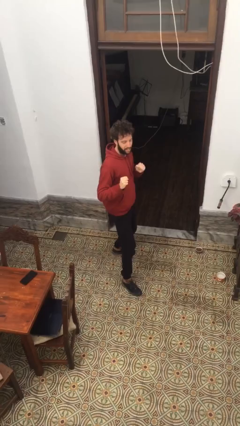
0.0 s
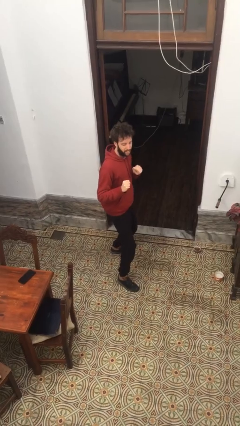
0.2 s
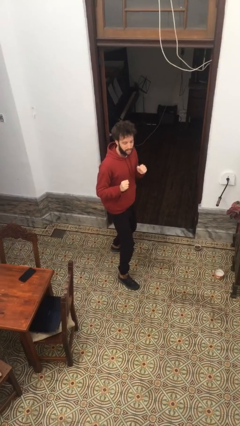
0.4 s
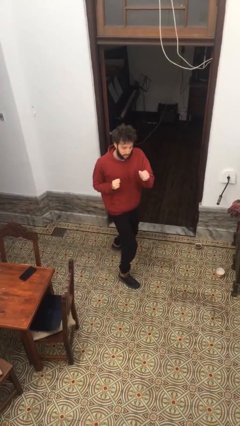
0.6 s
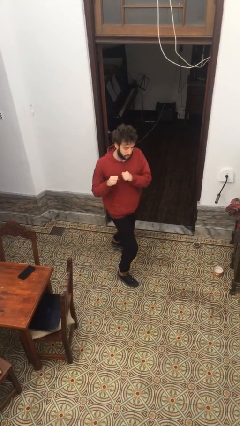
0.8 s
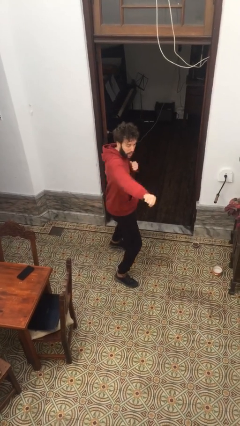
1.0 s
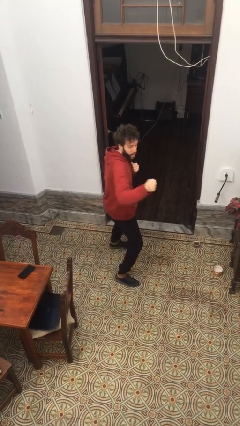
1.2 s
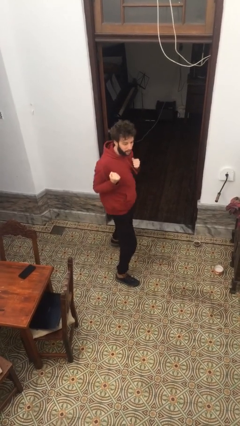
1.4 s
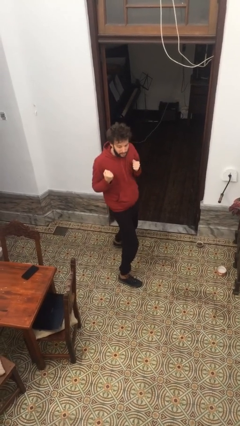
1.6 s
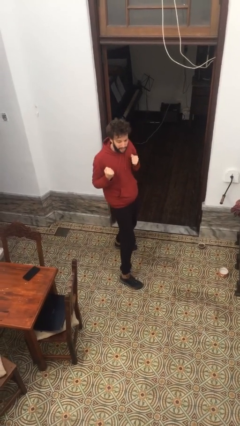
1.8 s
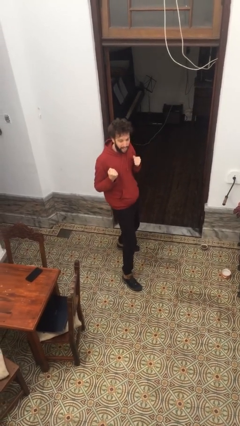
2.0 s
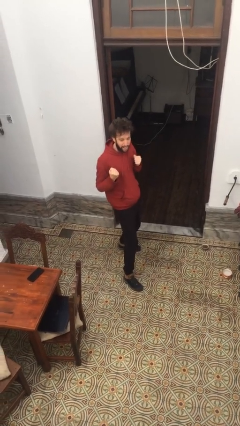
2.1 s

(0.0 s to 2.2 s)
person karate chop

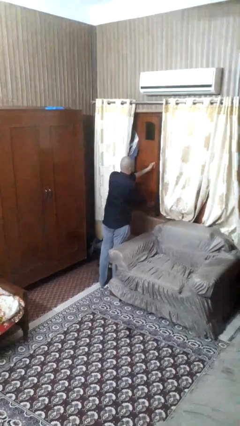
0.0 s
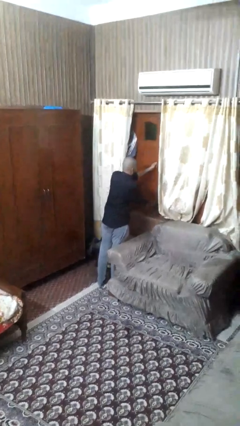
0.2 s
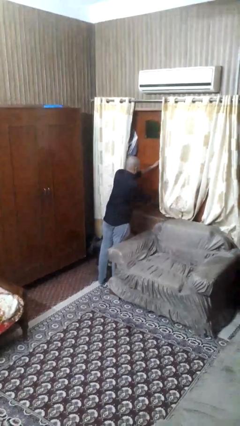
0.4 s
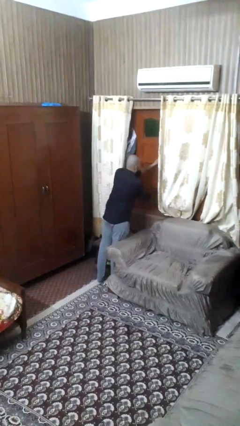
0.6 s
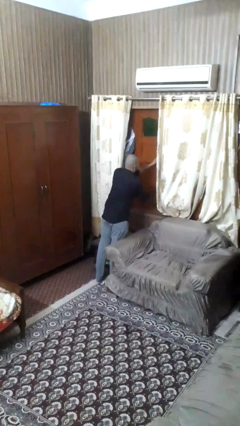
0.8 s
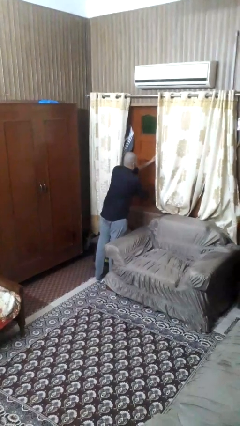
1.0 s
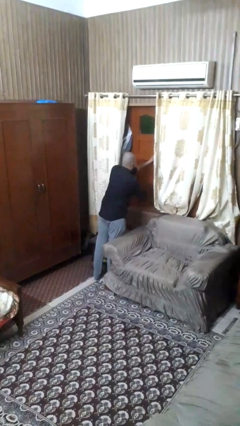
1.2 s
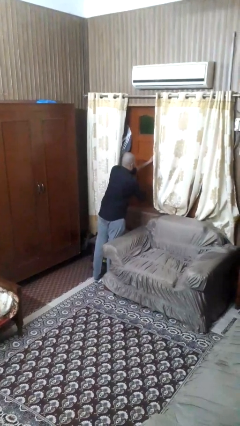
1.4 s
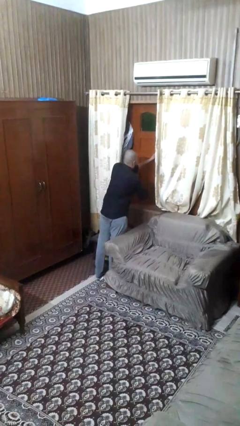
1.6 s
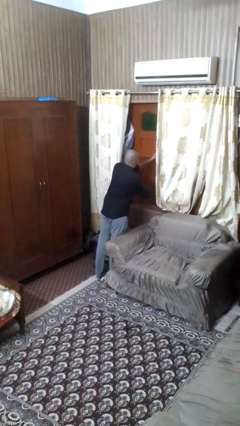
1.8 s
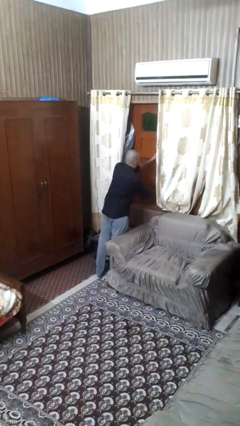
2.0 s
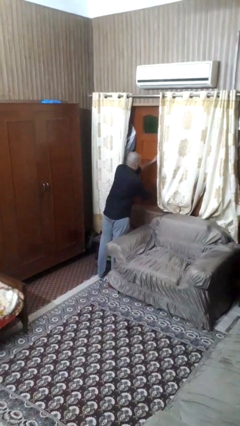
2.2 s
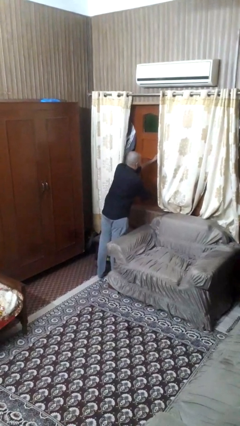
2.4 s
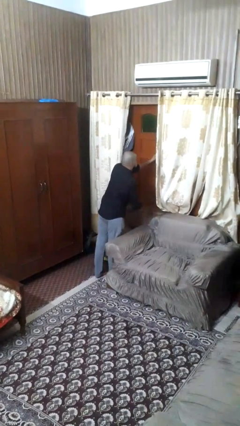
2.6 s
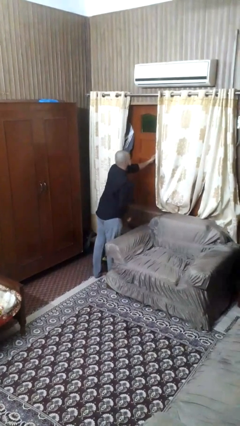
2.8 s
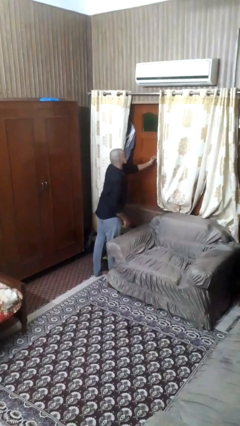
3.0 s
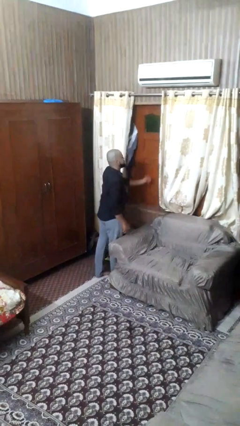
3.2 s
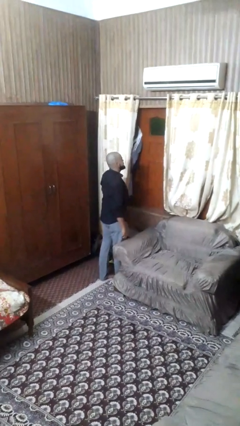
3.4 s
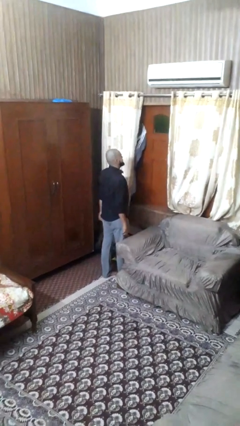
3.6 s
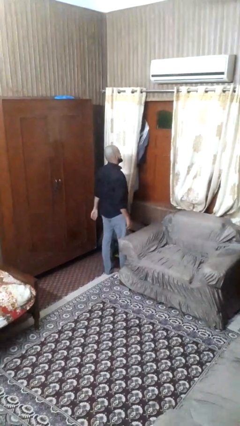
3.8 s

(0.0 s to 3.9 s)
person closes home window

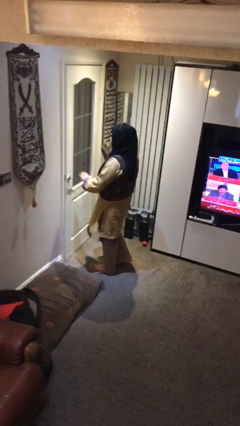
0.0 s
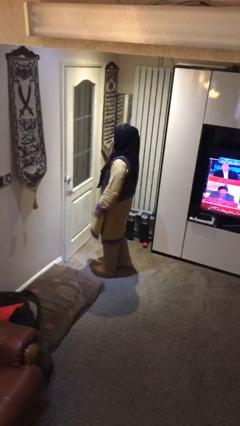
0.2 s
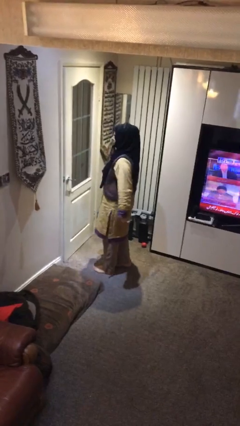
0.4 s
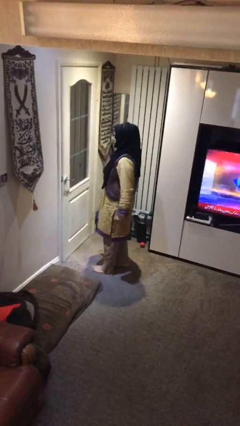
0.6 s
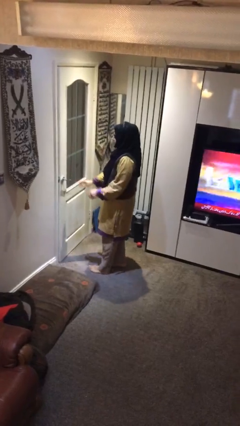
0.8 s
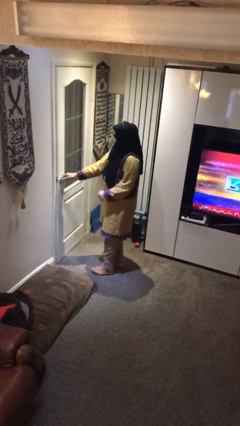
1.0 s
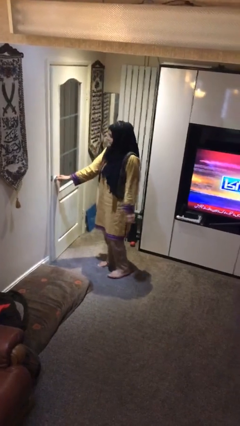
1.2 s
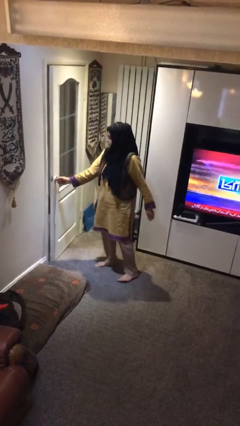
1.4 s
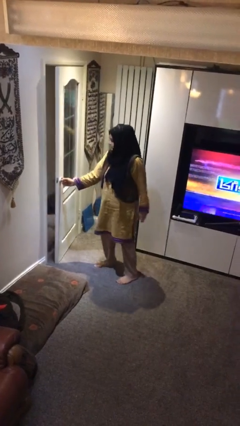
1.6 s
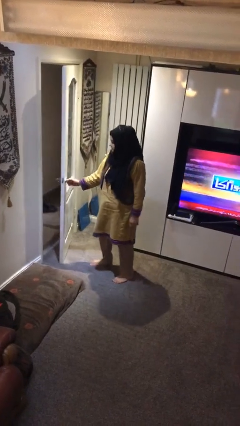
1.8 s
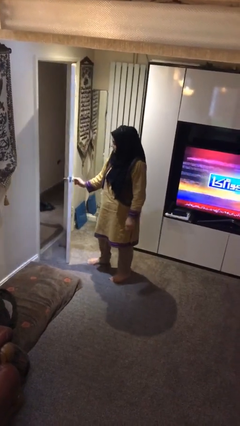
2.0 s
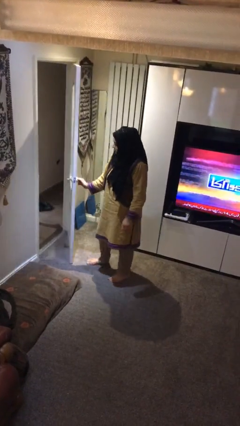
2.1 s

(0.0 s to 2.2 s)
person opens facility door

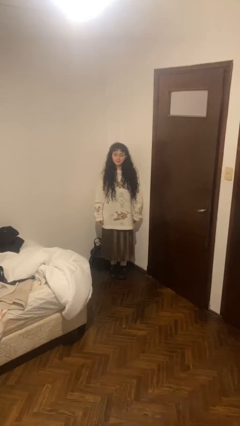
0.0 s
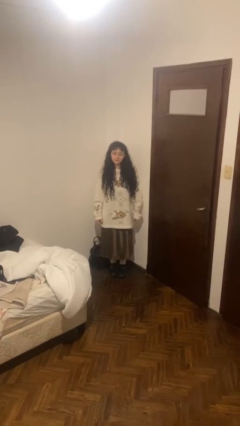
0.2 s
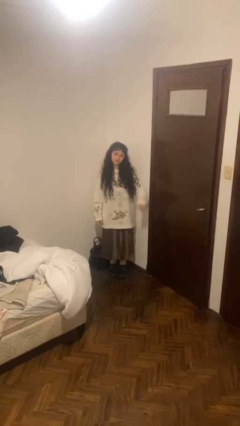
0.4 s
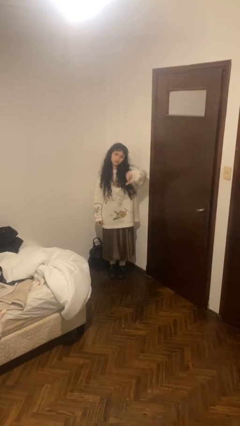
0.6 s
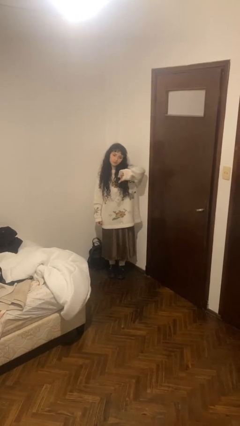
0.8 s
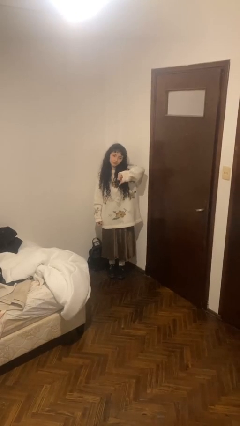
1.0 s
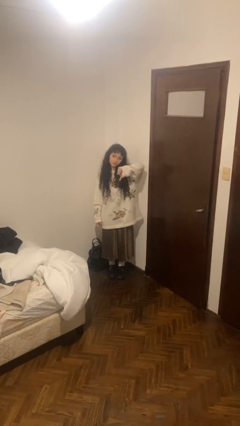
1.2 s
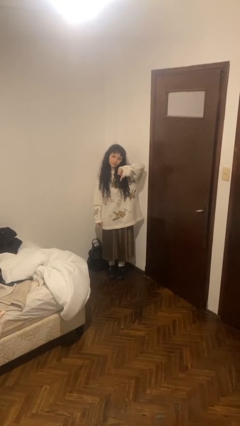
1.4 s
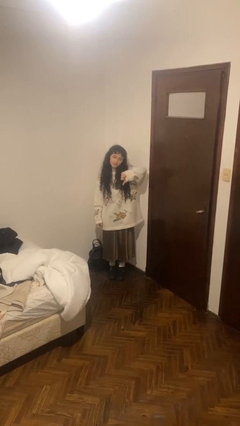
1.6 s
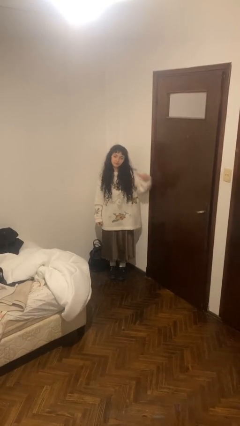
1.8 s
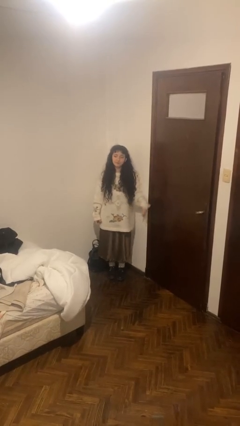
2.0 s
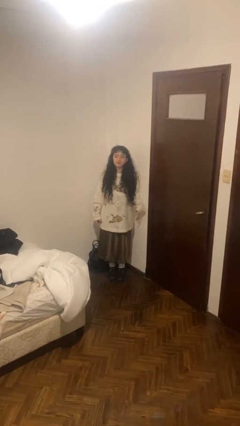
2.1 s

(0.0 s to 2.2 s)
person gestures thumbs down

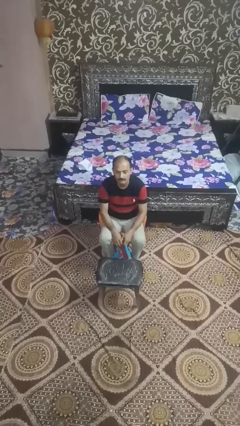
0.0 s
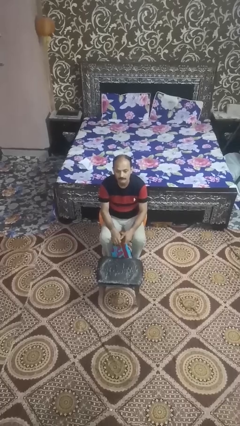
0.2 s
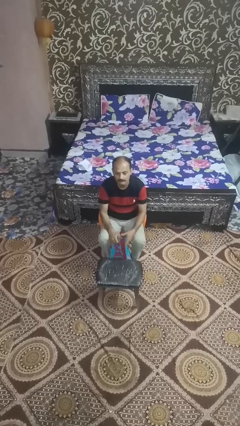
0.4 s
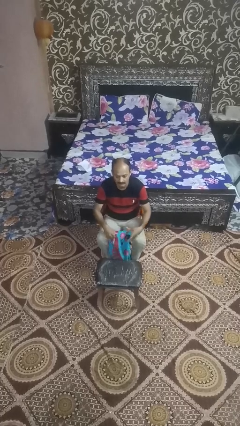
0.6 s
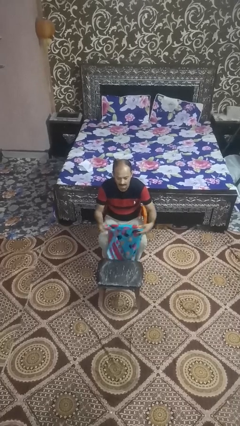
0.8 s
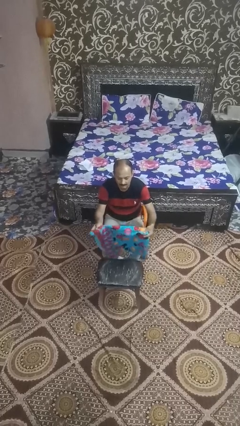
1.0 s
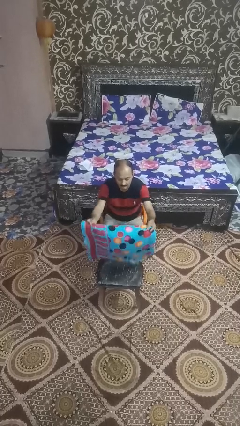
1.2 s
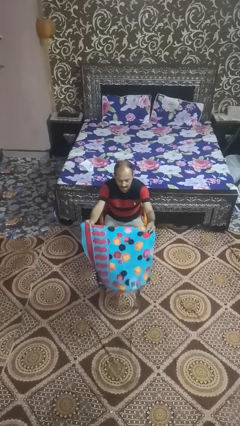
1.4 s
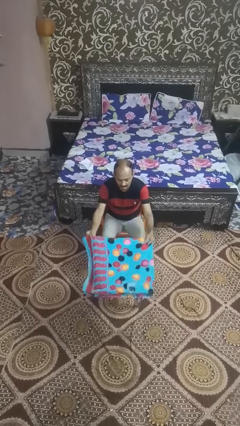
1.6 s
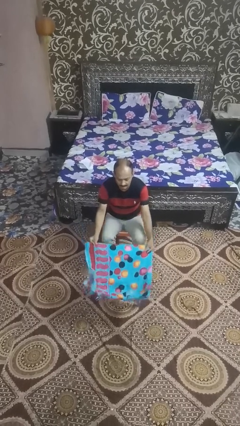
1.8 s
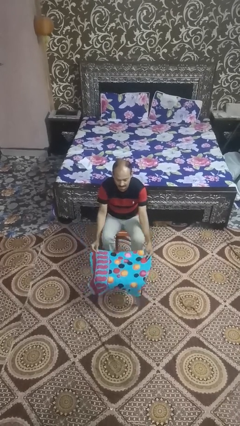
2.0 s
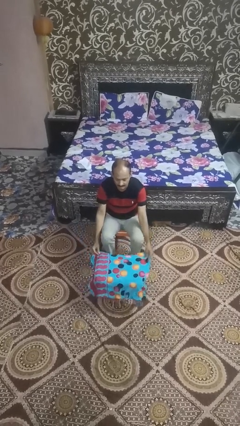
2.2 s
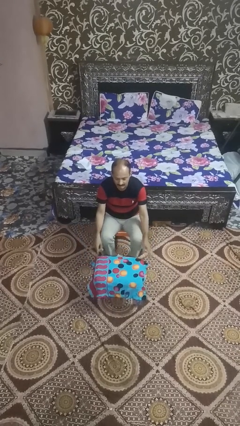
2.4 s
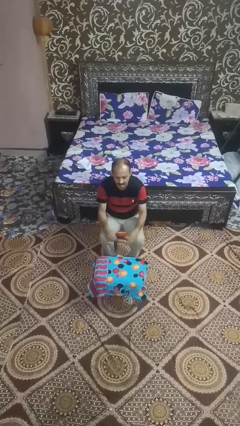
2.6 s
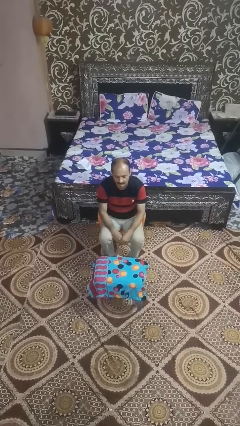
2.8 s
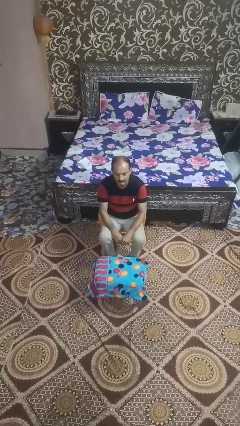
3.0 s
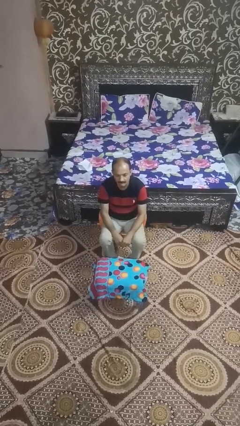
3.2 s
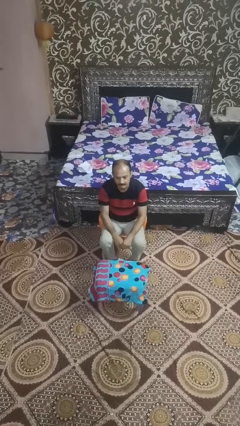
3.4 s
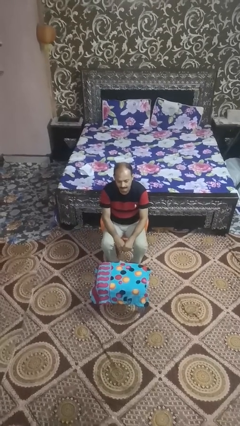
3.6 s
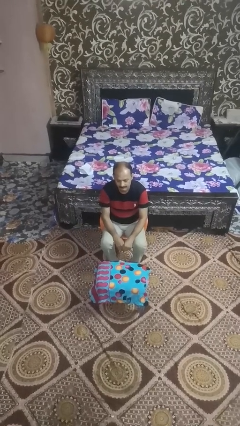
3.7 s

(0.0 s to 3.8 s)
person spreads tablecloth

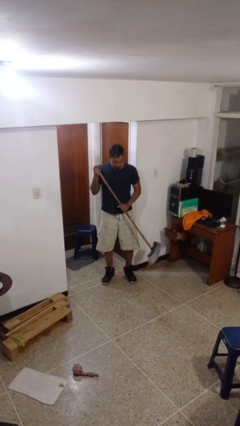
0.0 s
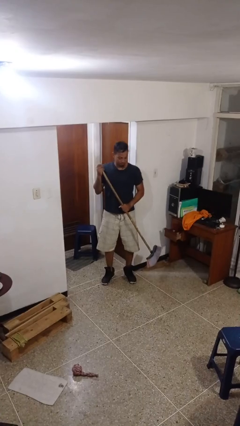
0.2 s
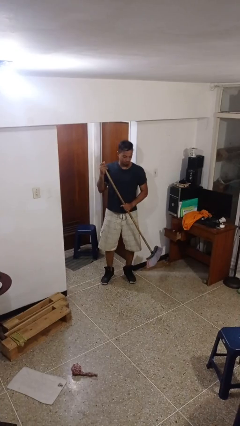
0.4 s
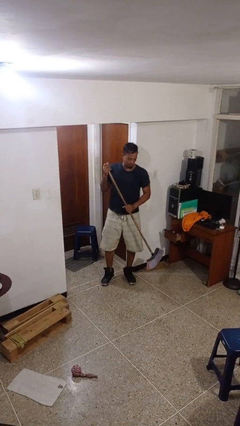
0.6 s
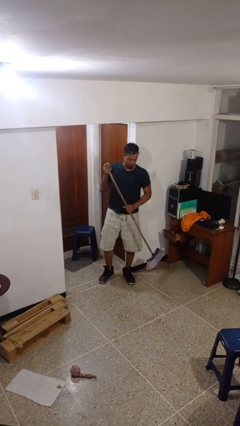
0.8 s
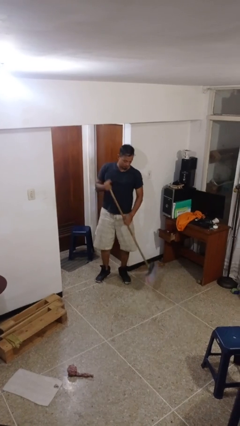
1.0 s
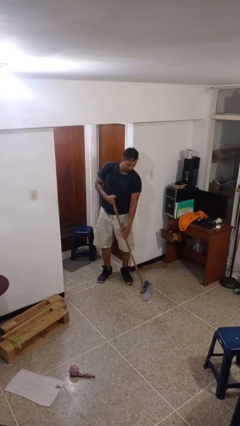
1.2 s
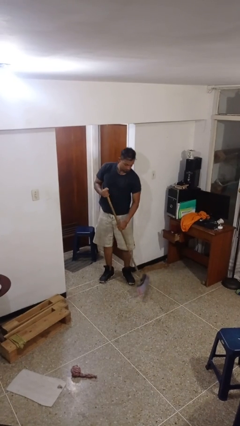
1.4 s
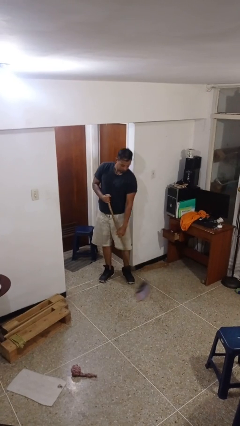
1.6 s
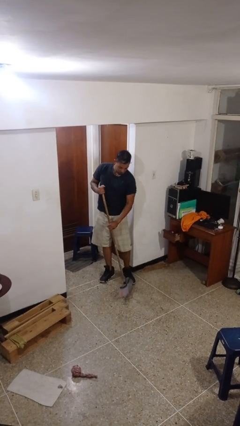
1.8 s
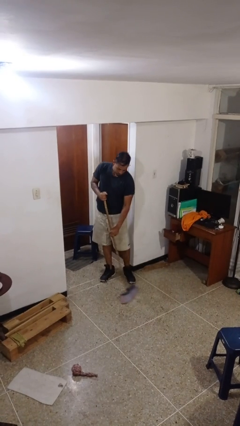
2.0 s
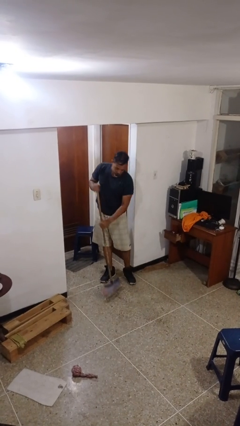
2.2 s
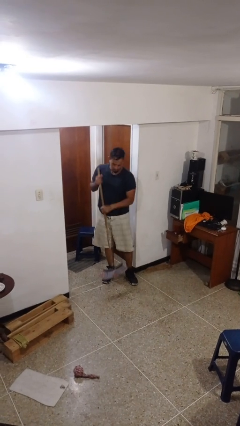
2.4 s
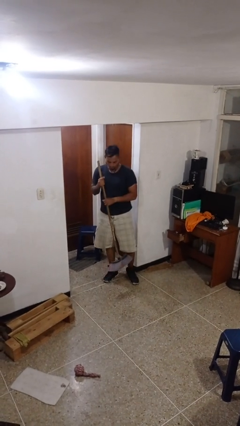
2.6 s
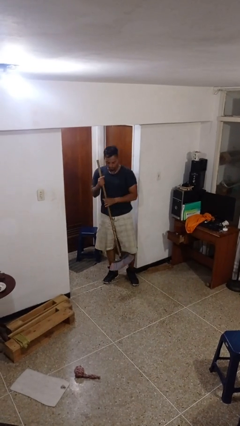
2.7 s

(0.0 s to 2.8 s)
person sweeps floor

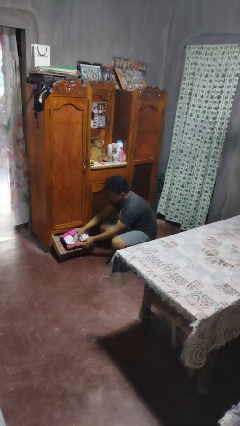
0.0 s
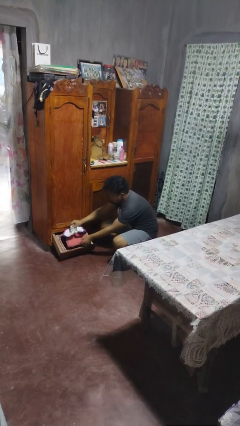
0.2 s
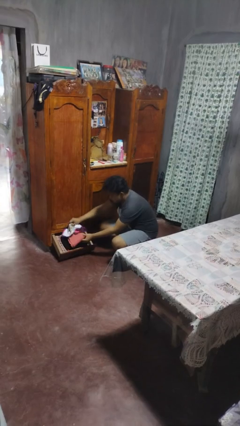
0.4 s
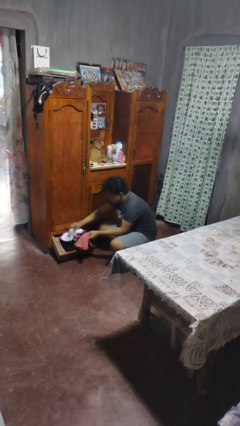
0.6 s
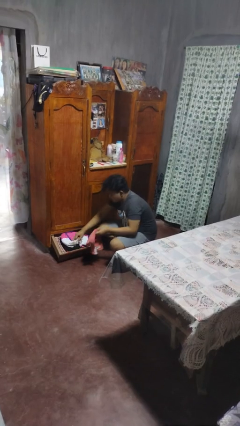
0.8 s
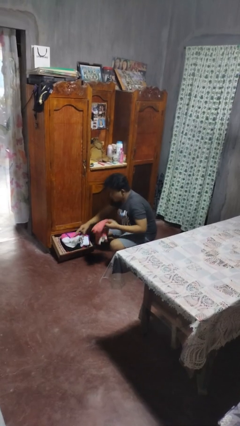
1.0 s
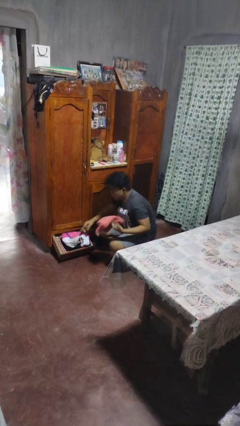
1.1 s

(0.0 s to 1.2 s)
person takes clothes from dresser
